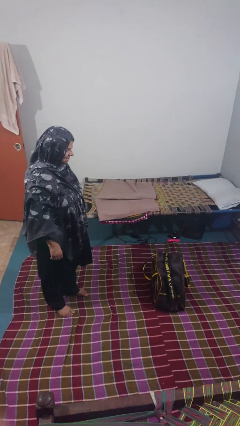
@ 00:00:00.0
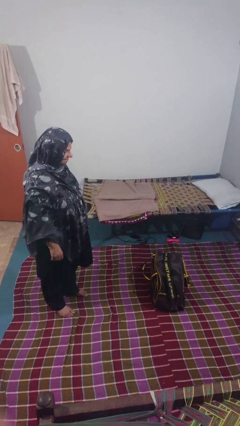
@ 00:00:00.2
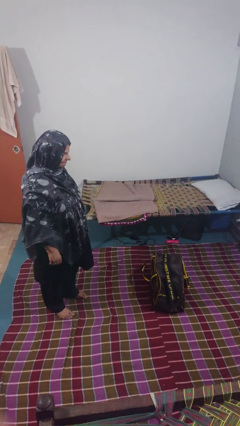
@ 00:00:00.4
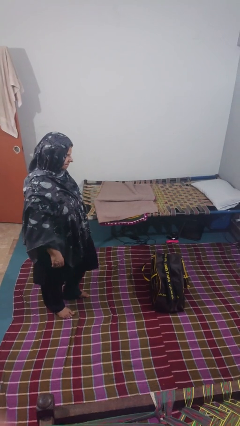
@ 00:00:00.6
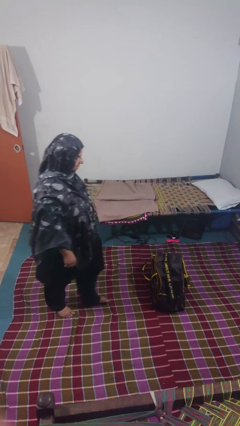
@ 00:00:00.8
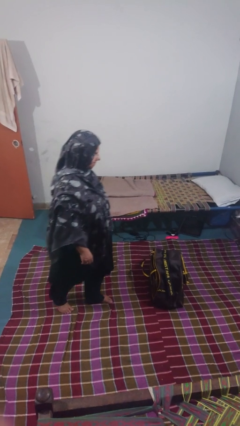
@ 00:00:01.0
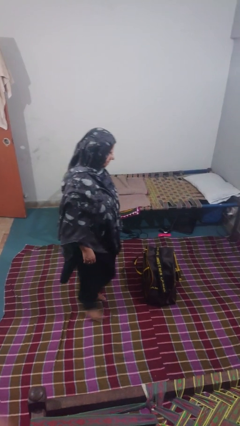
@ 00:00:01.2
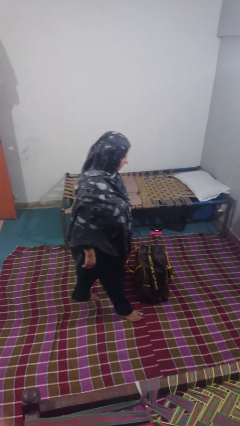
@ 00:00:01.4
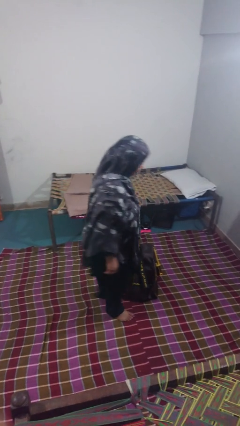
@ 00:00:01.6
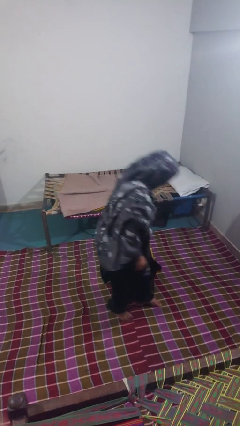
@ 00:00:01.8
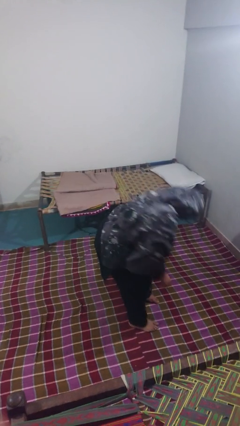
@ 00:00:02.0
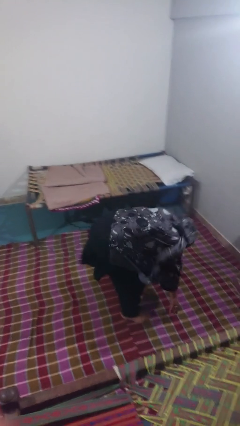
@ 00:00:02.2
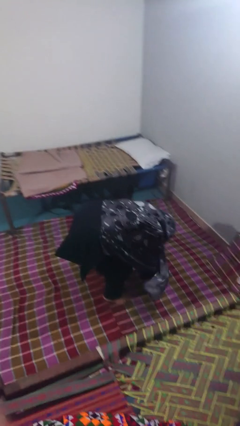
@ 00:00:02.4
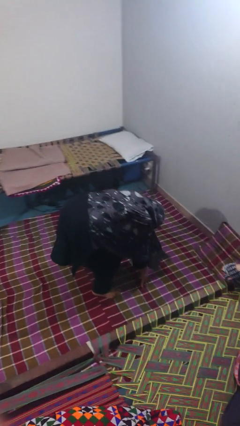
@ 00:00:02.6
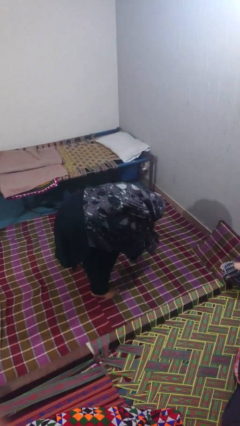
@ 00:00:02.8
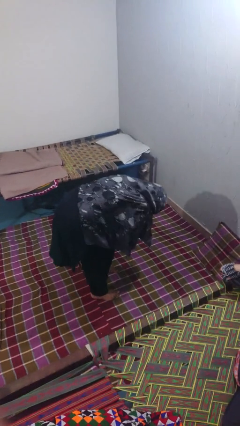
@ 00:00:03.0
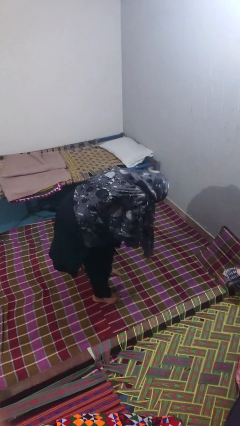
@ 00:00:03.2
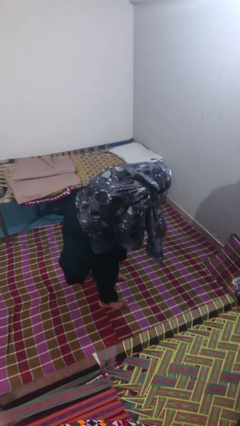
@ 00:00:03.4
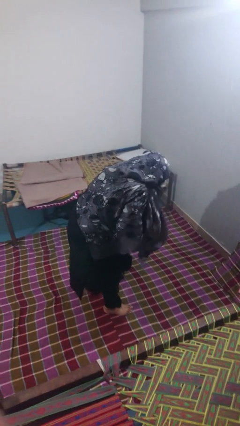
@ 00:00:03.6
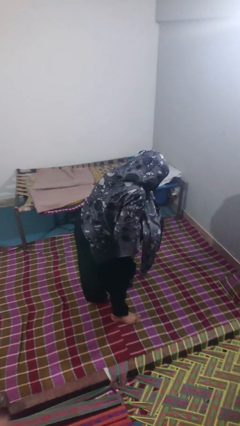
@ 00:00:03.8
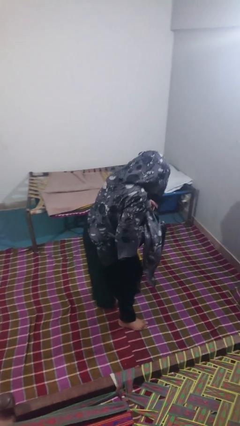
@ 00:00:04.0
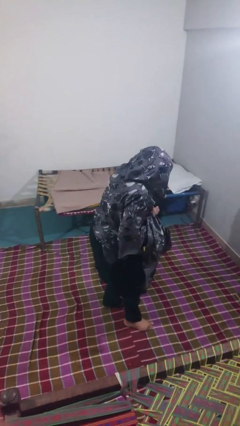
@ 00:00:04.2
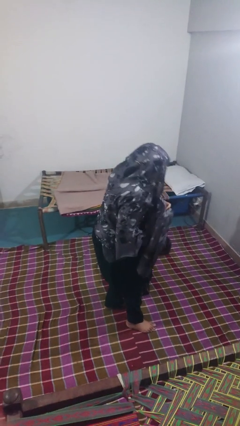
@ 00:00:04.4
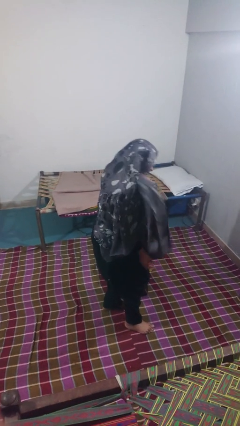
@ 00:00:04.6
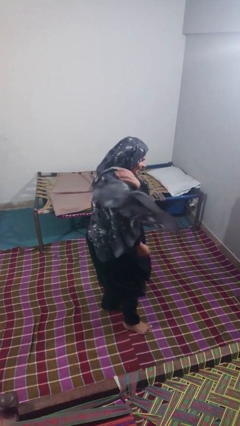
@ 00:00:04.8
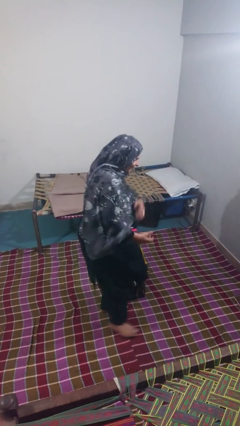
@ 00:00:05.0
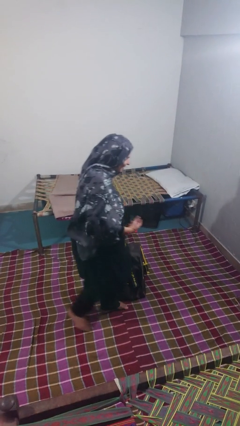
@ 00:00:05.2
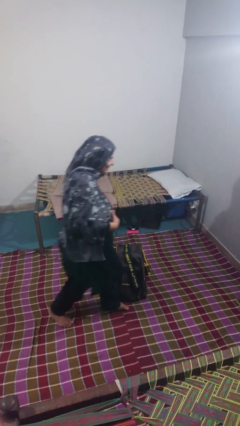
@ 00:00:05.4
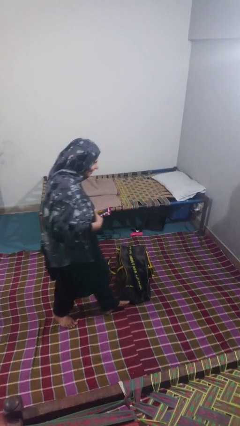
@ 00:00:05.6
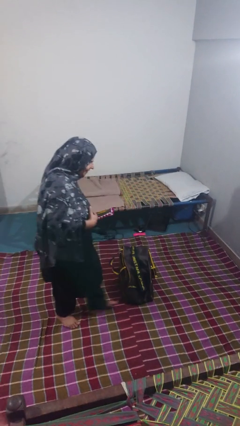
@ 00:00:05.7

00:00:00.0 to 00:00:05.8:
person trips on object on floor

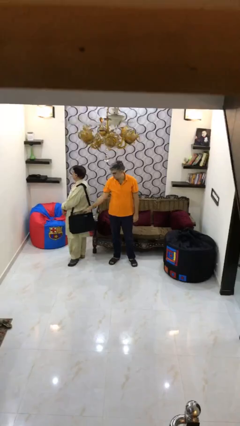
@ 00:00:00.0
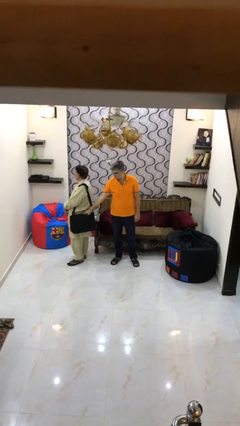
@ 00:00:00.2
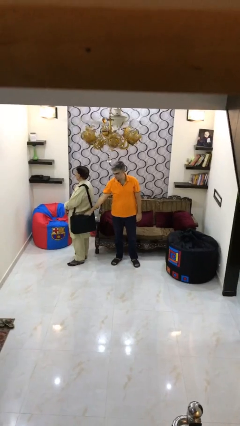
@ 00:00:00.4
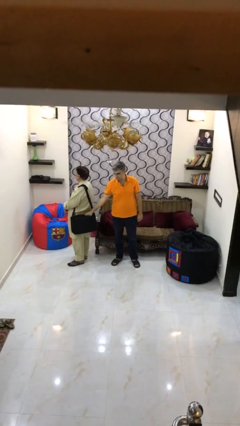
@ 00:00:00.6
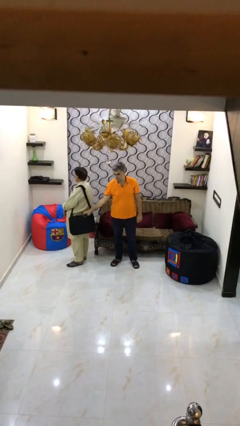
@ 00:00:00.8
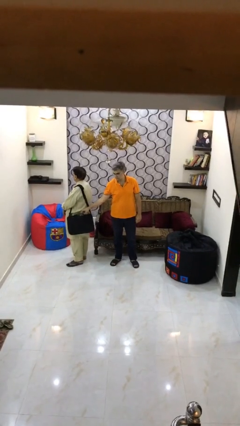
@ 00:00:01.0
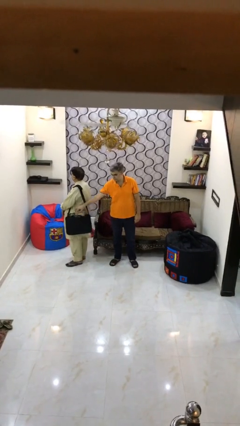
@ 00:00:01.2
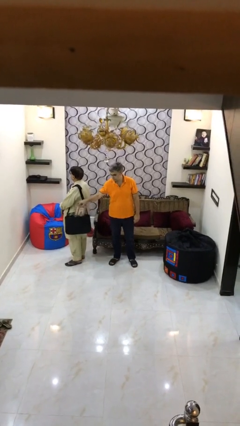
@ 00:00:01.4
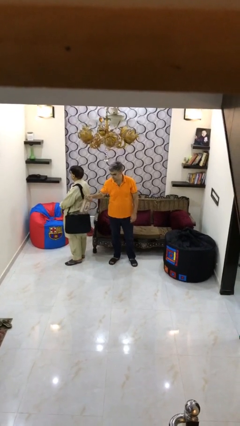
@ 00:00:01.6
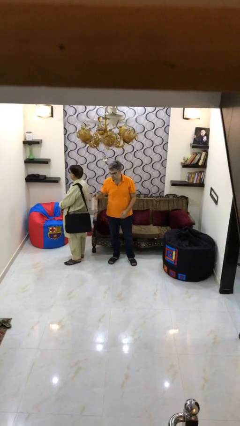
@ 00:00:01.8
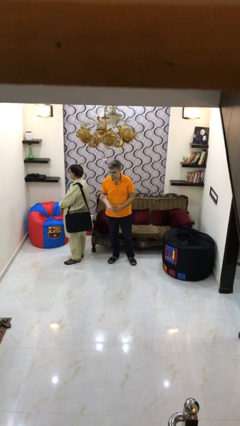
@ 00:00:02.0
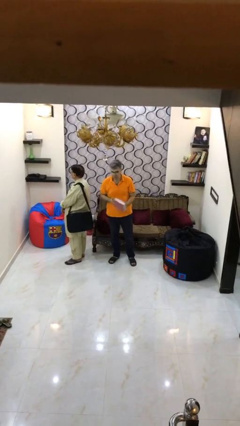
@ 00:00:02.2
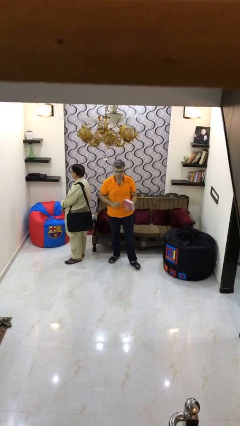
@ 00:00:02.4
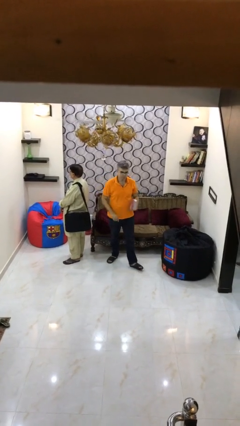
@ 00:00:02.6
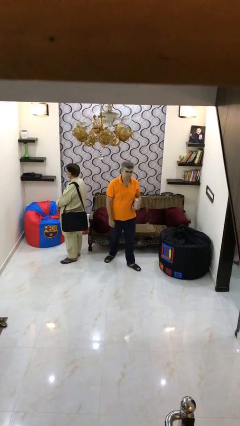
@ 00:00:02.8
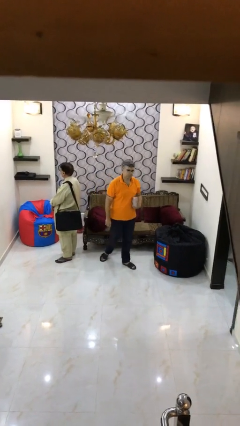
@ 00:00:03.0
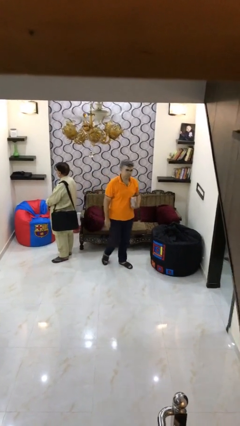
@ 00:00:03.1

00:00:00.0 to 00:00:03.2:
person steals object from person

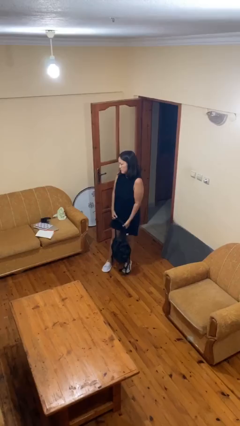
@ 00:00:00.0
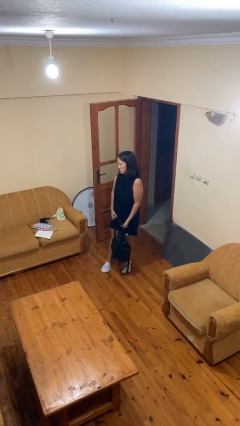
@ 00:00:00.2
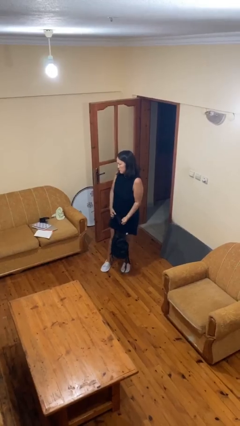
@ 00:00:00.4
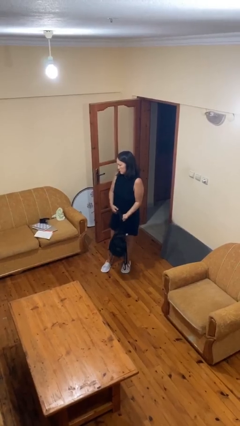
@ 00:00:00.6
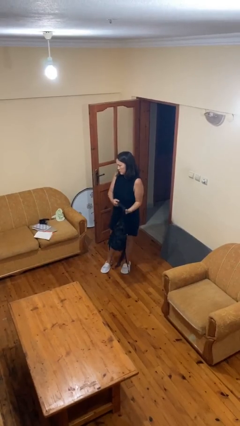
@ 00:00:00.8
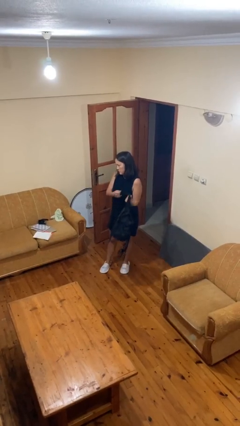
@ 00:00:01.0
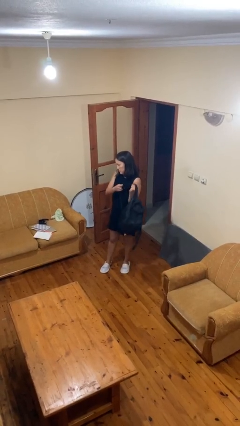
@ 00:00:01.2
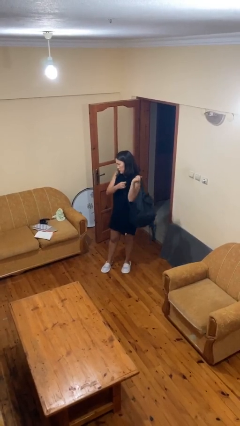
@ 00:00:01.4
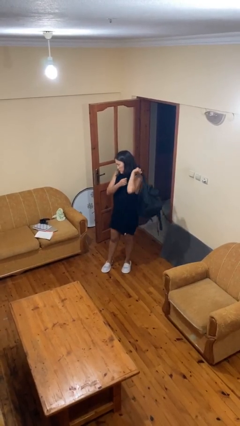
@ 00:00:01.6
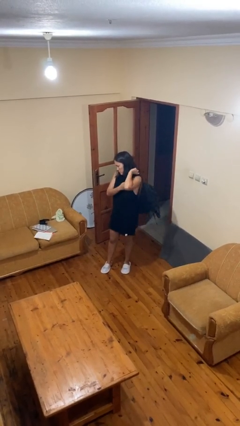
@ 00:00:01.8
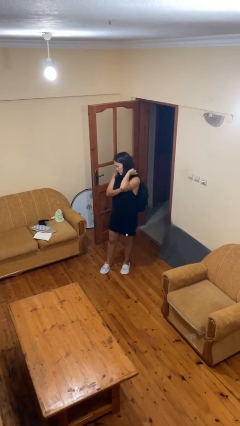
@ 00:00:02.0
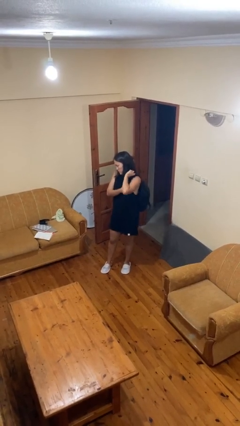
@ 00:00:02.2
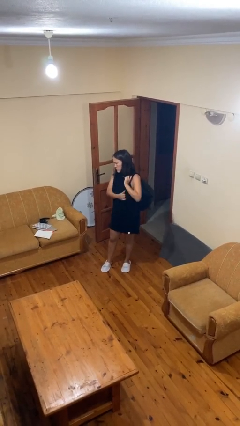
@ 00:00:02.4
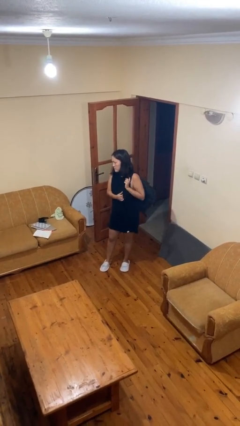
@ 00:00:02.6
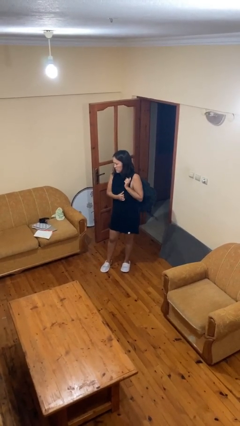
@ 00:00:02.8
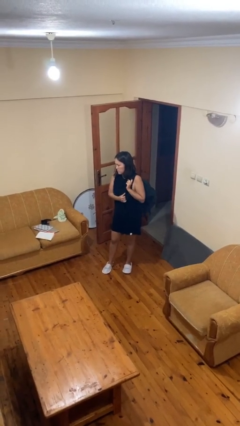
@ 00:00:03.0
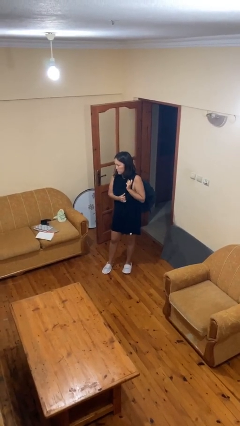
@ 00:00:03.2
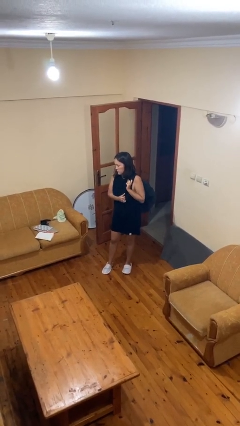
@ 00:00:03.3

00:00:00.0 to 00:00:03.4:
person puts on backpack

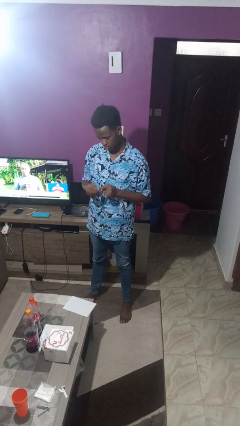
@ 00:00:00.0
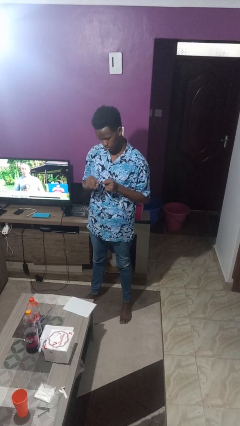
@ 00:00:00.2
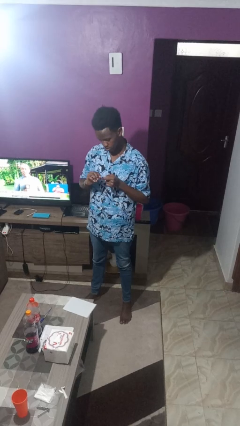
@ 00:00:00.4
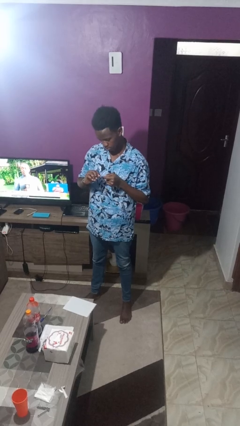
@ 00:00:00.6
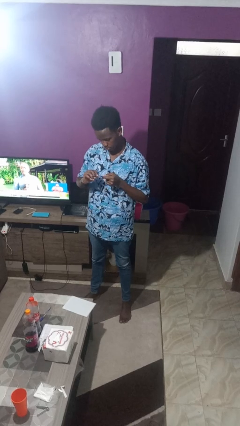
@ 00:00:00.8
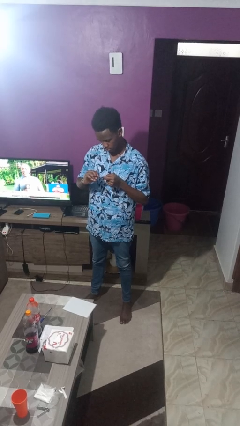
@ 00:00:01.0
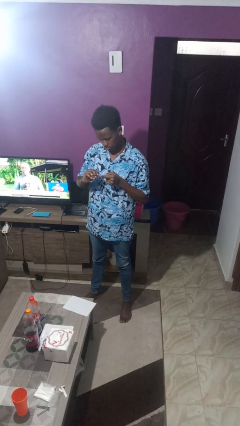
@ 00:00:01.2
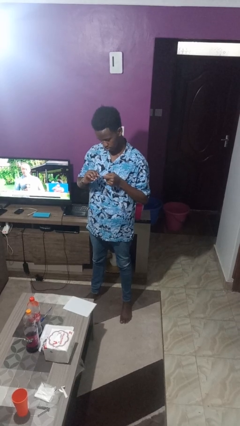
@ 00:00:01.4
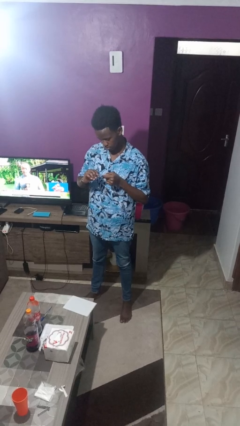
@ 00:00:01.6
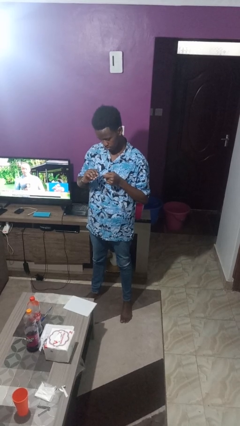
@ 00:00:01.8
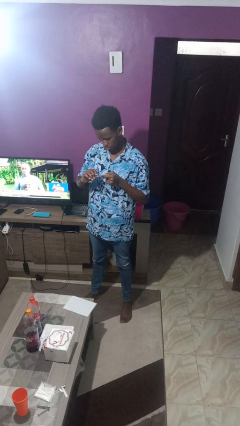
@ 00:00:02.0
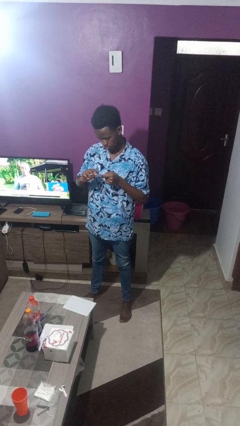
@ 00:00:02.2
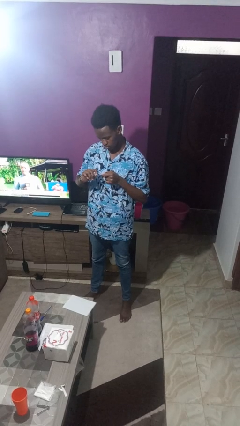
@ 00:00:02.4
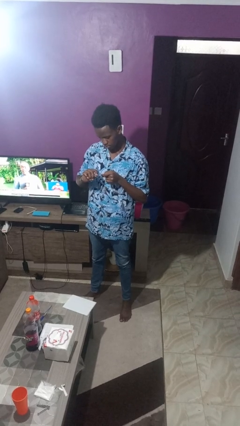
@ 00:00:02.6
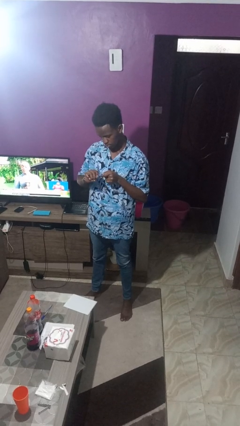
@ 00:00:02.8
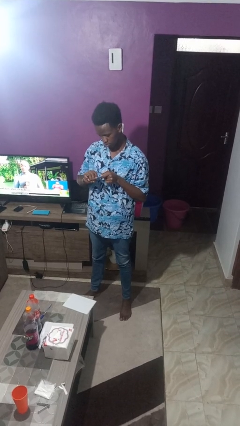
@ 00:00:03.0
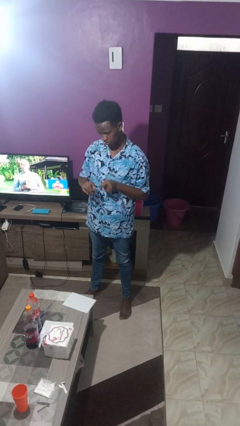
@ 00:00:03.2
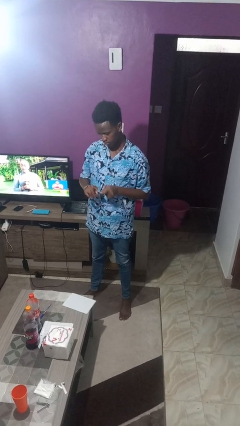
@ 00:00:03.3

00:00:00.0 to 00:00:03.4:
person files fingernails

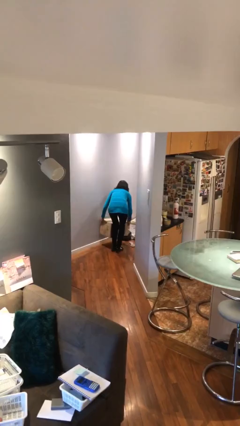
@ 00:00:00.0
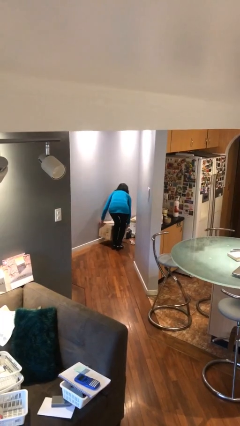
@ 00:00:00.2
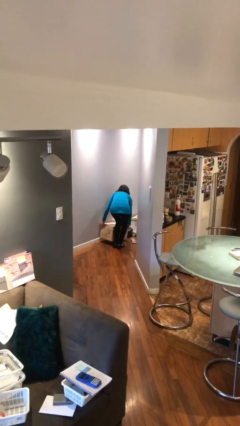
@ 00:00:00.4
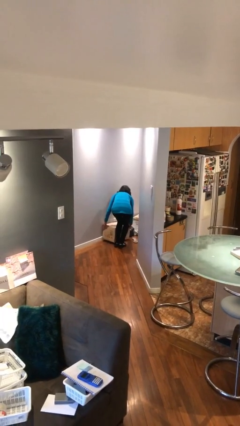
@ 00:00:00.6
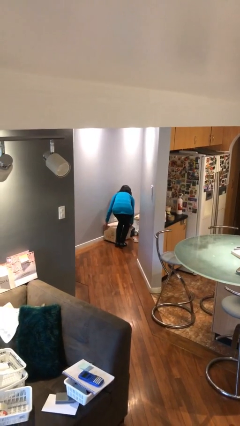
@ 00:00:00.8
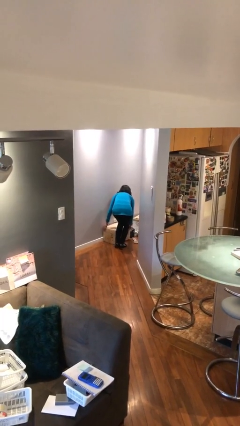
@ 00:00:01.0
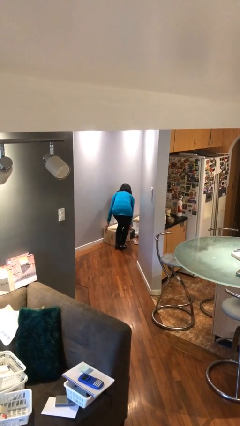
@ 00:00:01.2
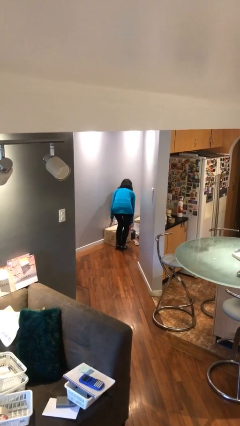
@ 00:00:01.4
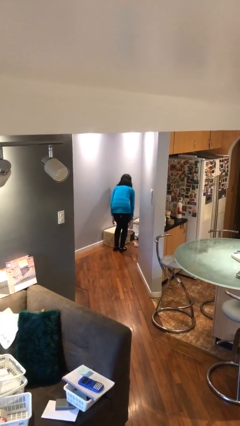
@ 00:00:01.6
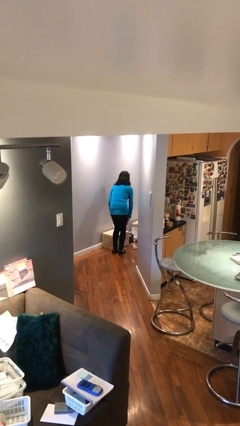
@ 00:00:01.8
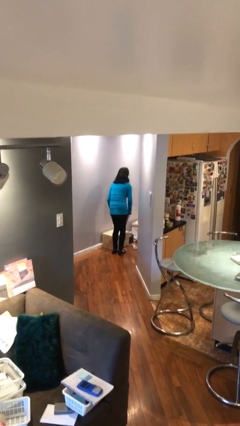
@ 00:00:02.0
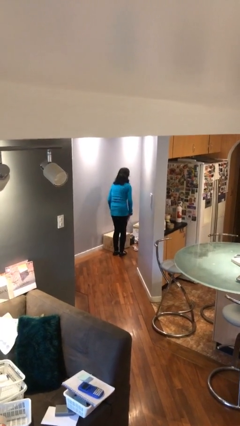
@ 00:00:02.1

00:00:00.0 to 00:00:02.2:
person puts down object on floor
